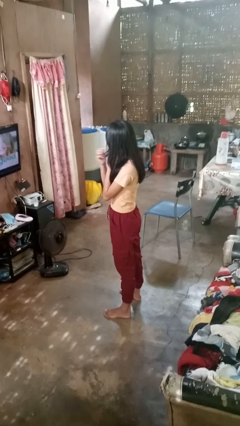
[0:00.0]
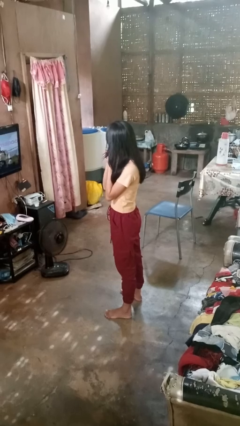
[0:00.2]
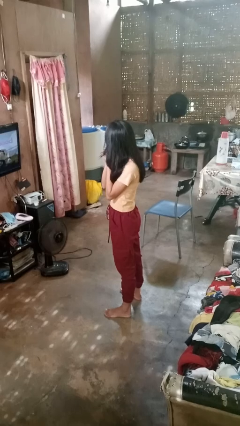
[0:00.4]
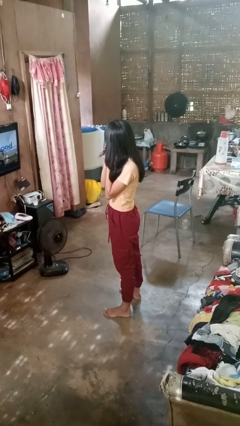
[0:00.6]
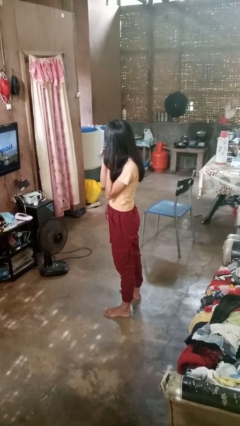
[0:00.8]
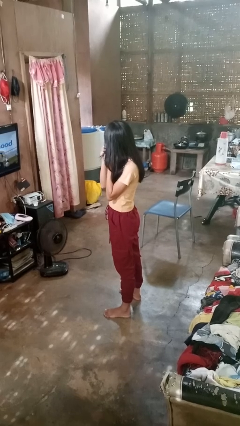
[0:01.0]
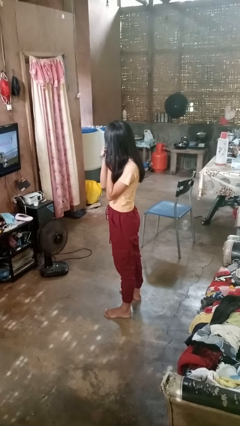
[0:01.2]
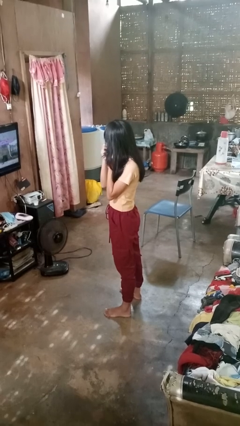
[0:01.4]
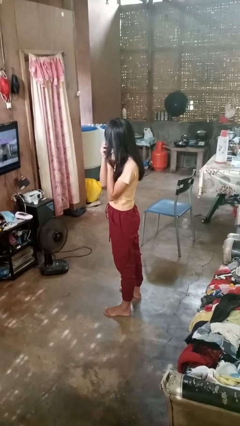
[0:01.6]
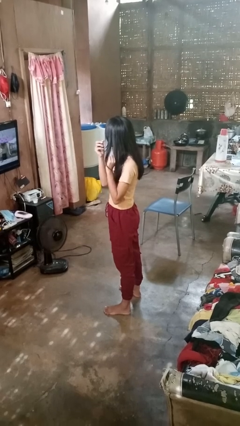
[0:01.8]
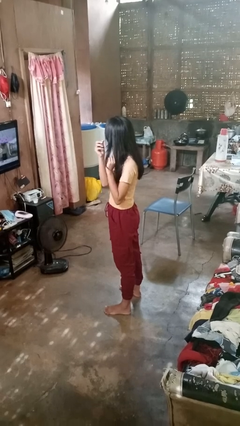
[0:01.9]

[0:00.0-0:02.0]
person takes off earrings

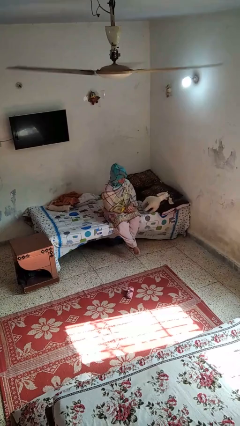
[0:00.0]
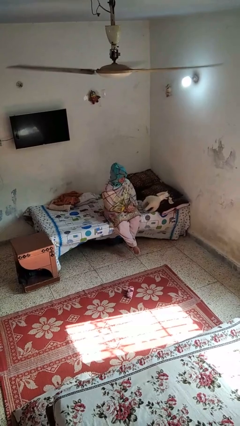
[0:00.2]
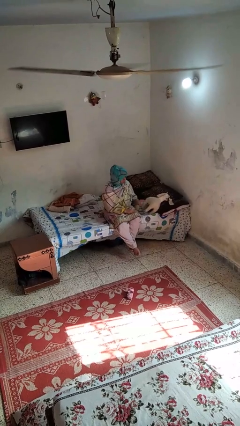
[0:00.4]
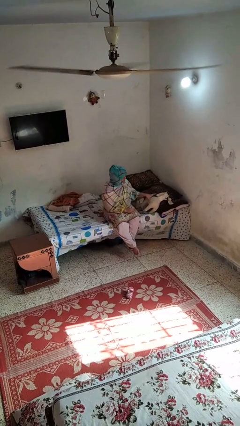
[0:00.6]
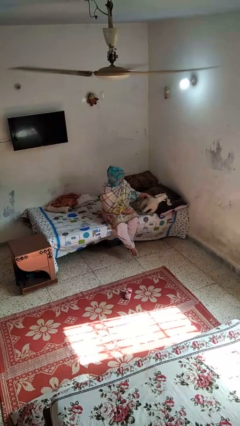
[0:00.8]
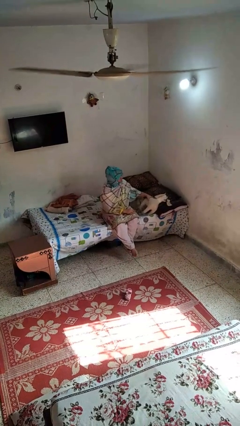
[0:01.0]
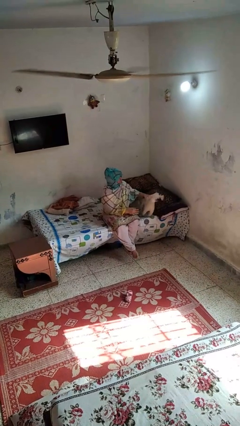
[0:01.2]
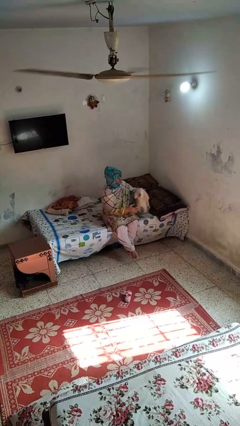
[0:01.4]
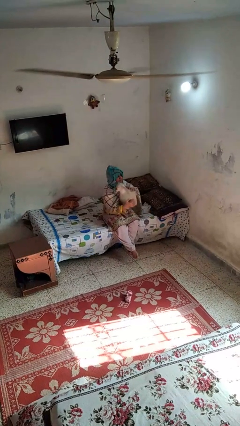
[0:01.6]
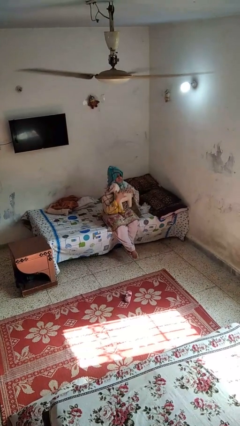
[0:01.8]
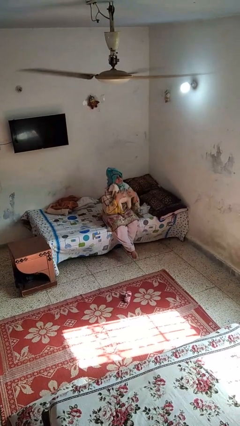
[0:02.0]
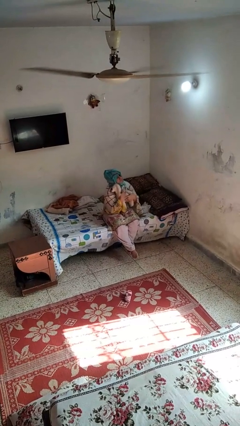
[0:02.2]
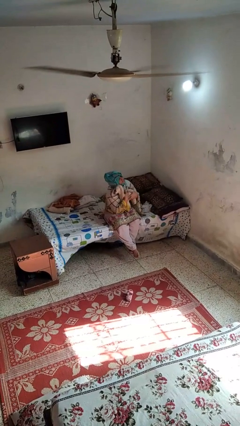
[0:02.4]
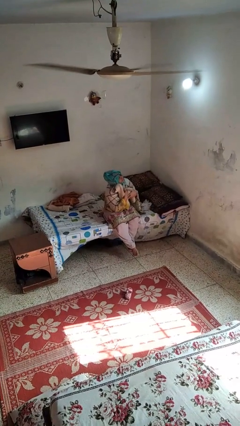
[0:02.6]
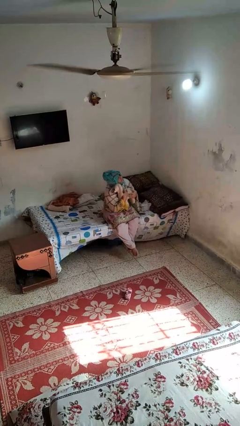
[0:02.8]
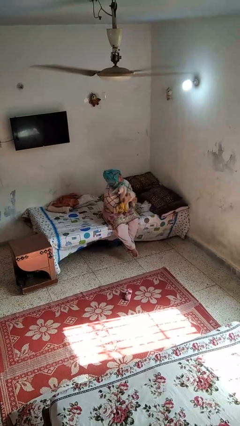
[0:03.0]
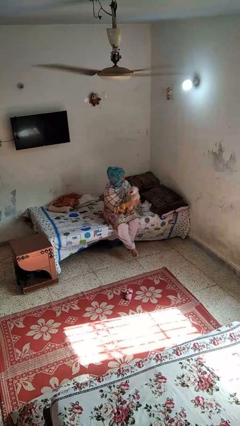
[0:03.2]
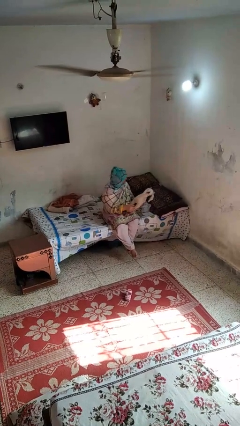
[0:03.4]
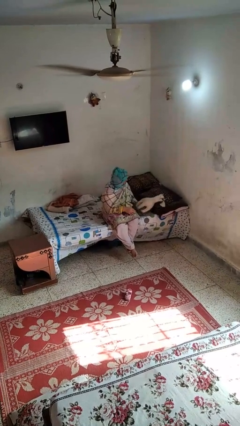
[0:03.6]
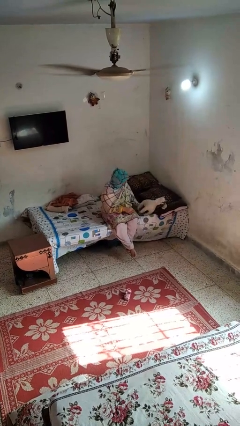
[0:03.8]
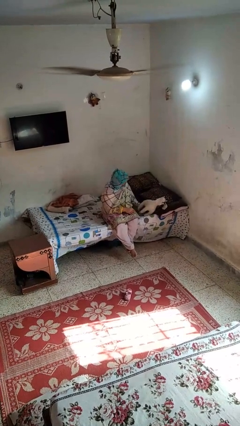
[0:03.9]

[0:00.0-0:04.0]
person hugs stuffed animal

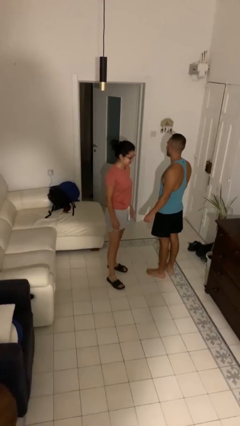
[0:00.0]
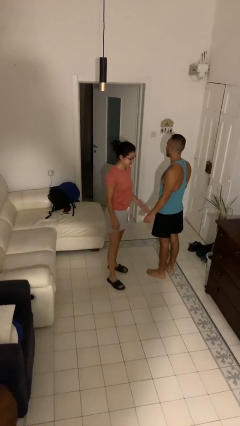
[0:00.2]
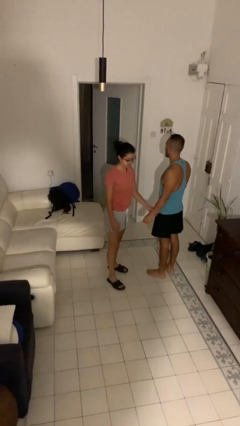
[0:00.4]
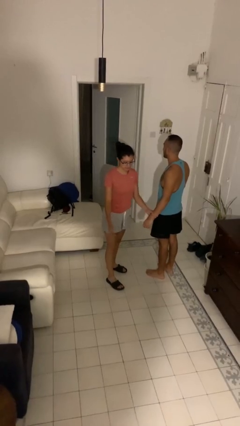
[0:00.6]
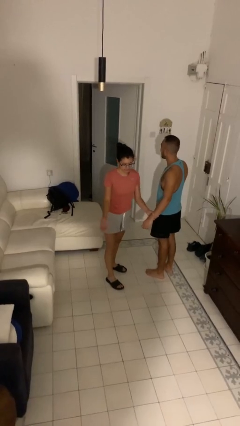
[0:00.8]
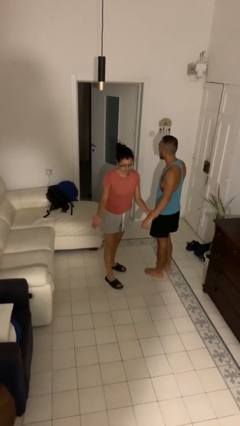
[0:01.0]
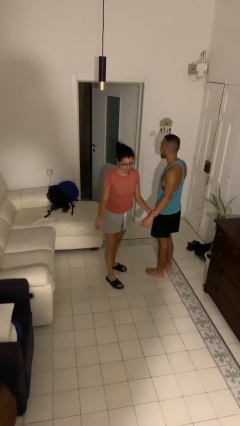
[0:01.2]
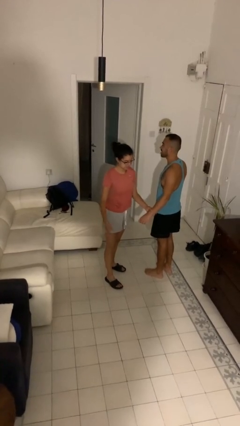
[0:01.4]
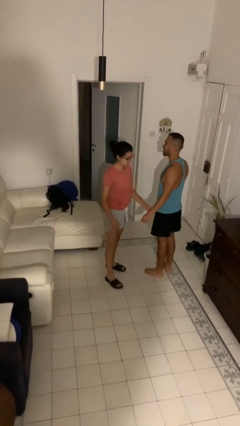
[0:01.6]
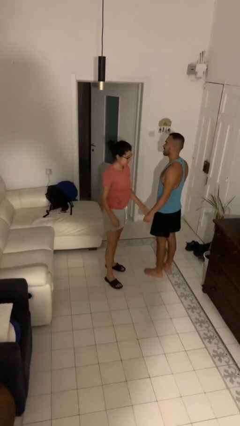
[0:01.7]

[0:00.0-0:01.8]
person grabs person by forearm

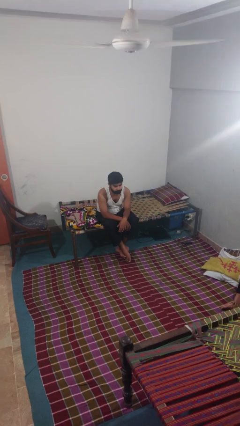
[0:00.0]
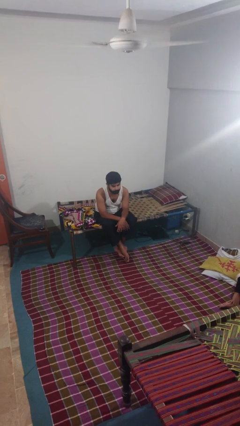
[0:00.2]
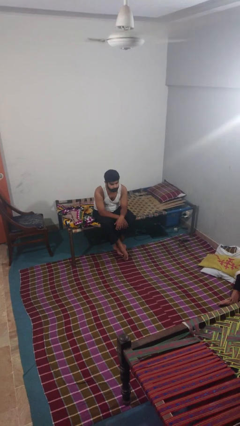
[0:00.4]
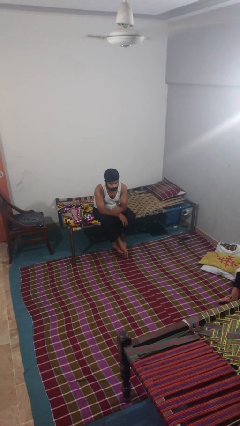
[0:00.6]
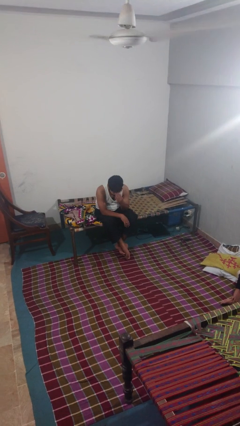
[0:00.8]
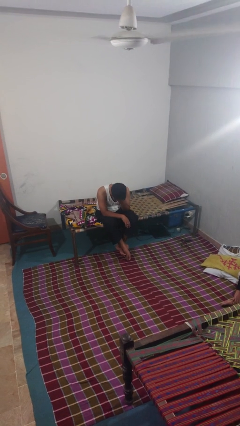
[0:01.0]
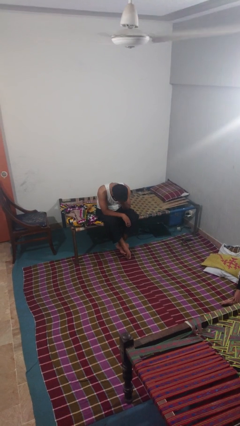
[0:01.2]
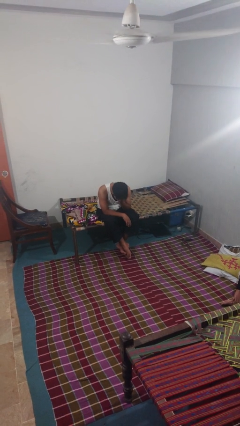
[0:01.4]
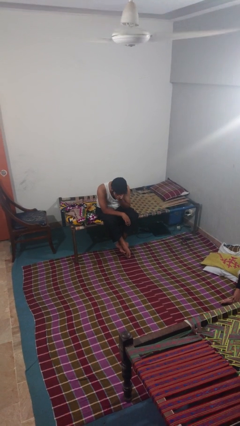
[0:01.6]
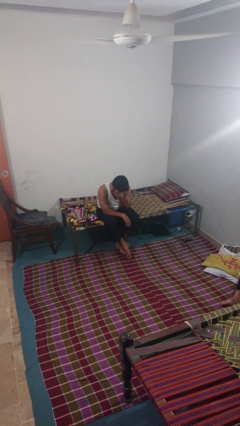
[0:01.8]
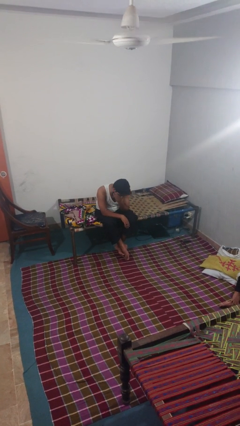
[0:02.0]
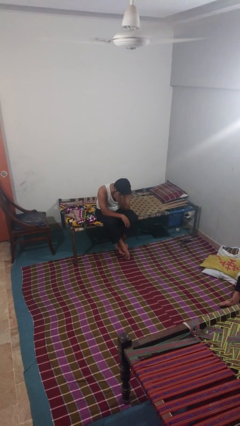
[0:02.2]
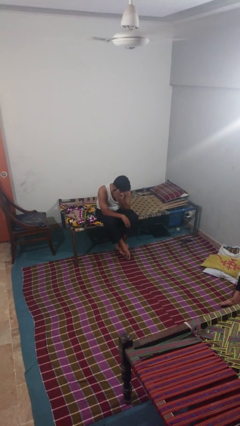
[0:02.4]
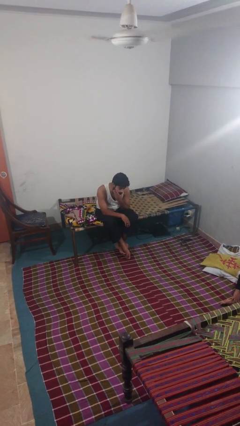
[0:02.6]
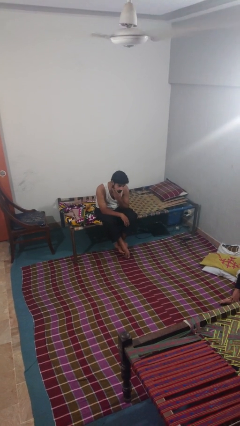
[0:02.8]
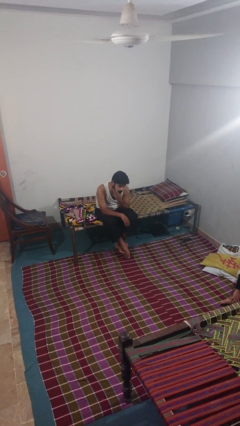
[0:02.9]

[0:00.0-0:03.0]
person covers face with hands

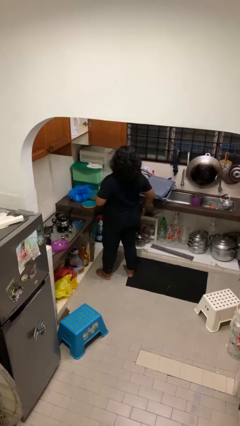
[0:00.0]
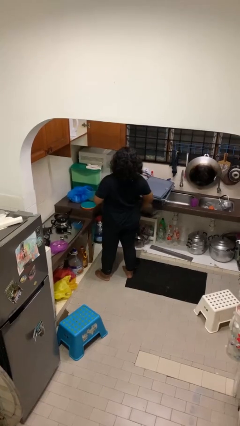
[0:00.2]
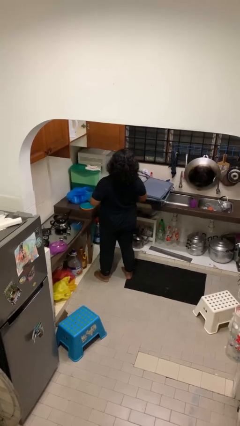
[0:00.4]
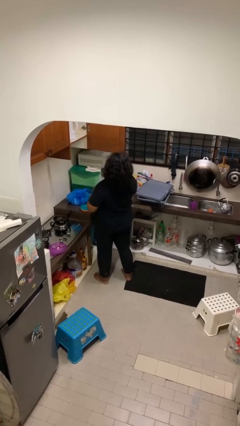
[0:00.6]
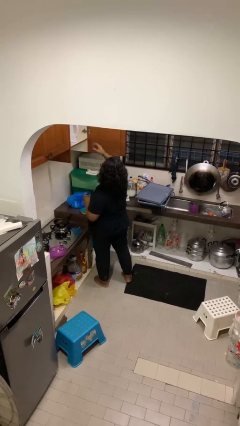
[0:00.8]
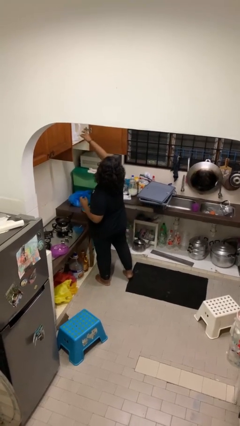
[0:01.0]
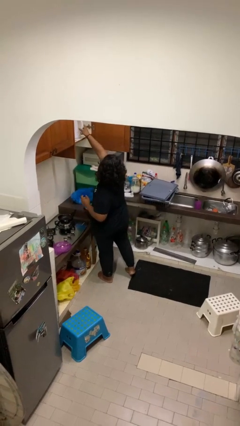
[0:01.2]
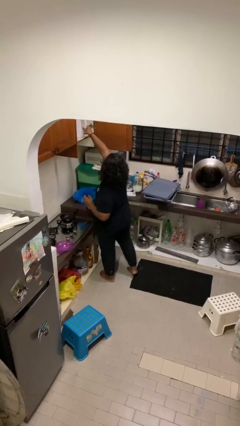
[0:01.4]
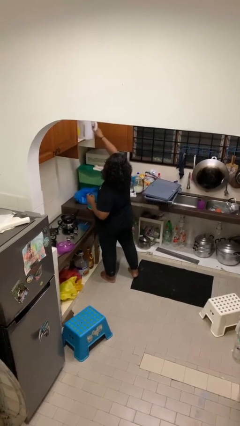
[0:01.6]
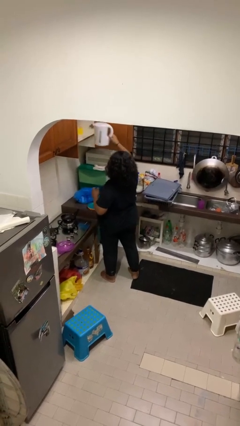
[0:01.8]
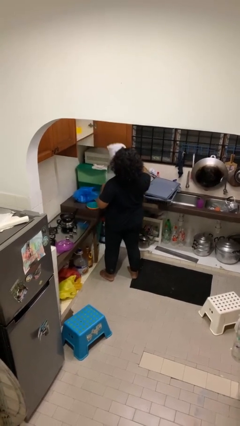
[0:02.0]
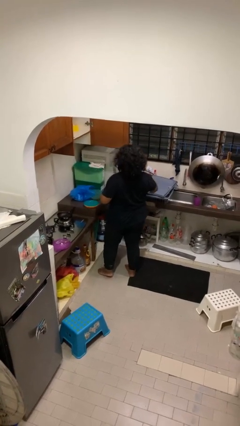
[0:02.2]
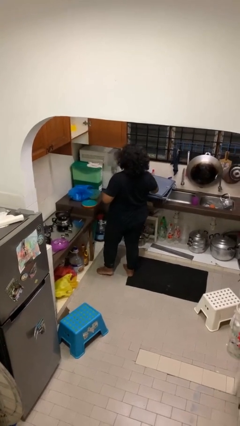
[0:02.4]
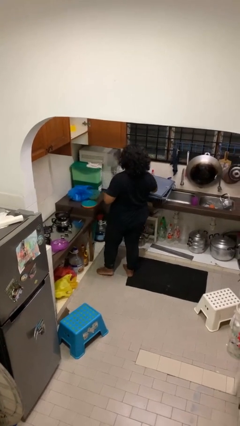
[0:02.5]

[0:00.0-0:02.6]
person takes object from cabinet

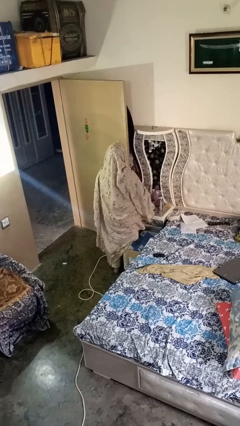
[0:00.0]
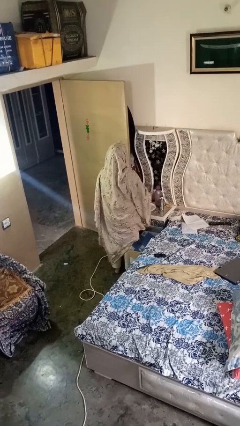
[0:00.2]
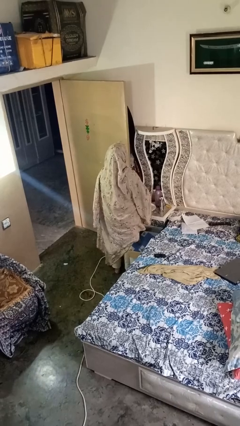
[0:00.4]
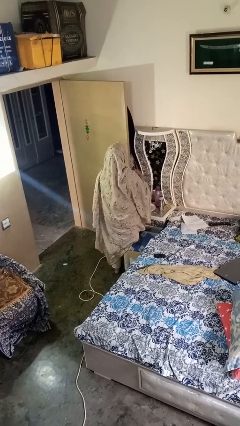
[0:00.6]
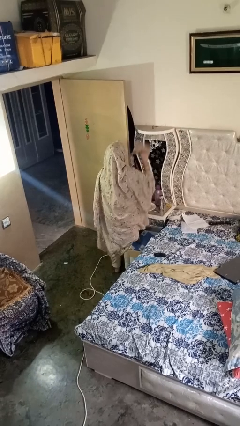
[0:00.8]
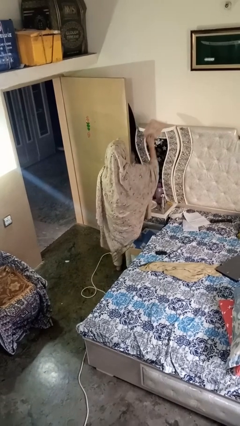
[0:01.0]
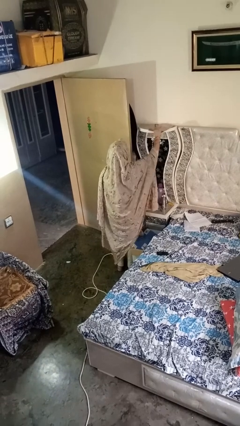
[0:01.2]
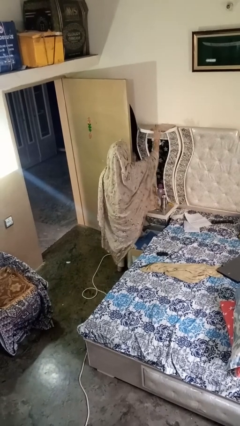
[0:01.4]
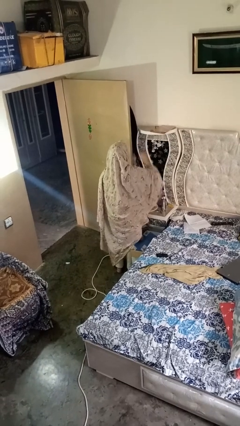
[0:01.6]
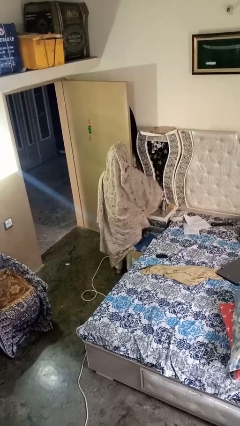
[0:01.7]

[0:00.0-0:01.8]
person puts down object on shelf

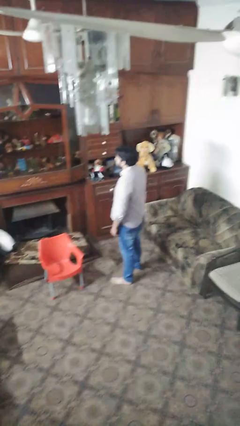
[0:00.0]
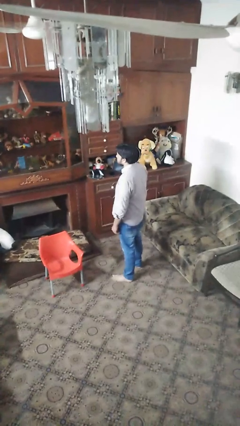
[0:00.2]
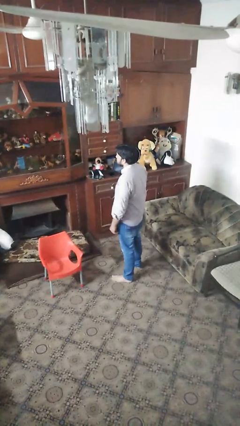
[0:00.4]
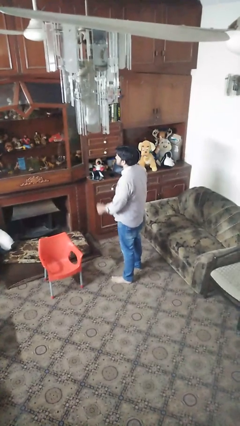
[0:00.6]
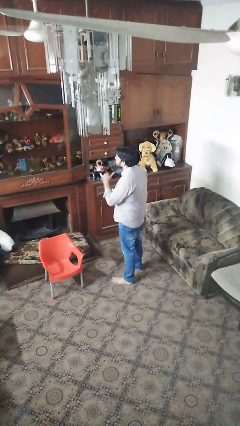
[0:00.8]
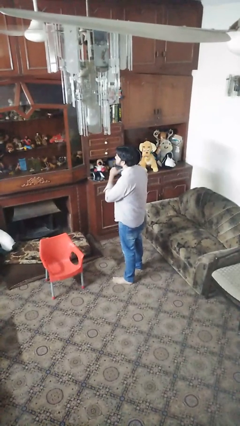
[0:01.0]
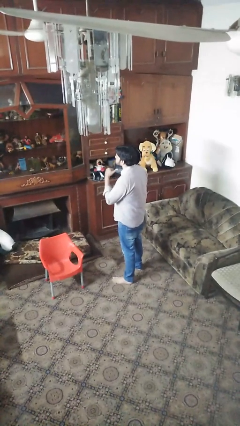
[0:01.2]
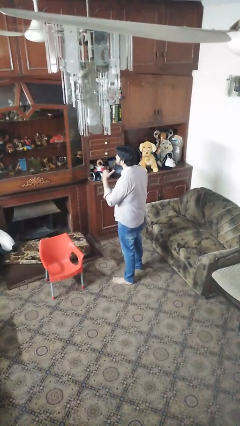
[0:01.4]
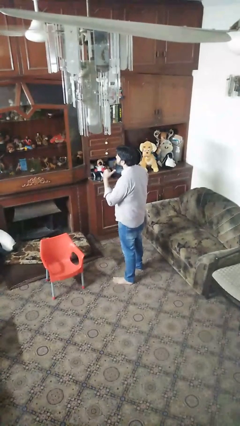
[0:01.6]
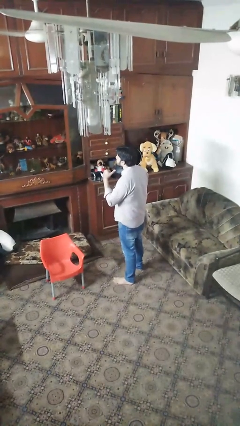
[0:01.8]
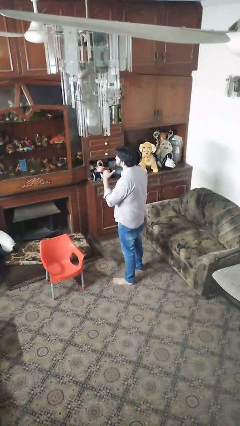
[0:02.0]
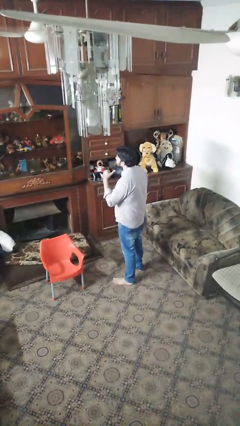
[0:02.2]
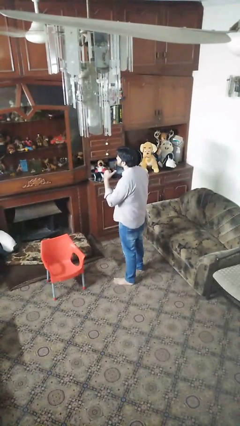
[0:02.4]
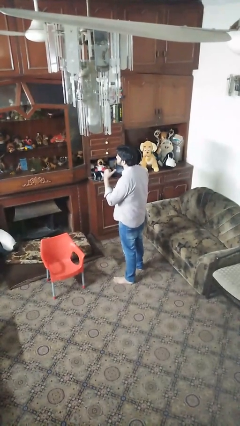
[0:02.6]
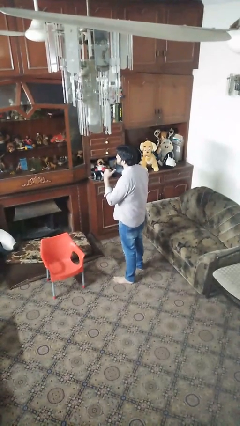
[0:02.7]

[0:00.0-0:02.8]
person gestures cut
